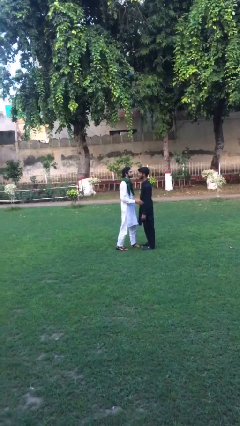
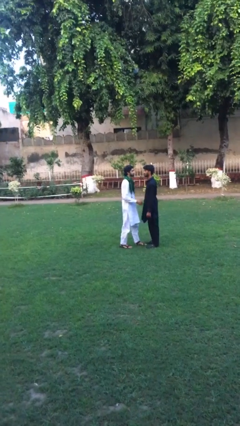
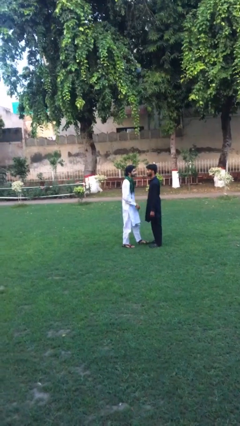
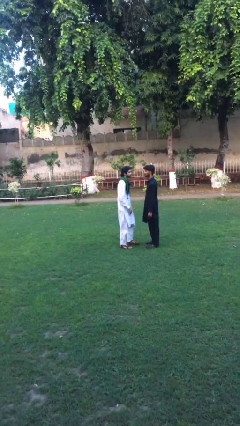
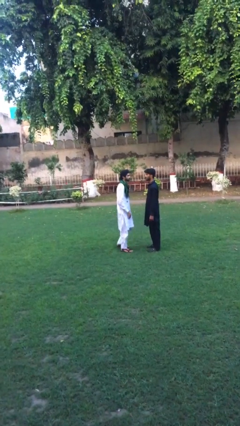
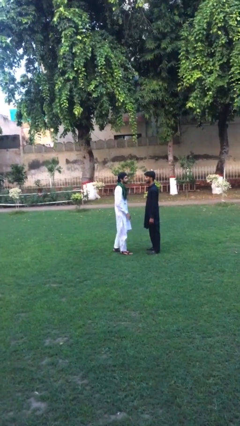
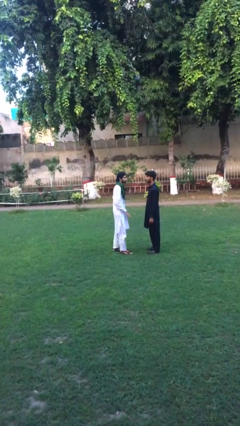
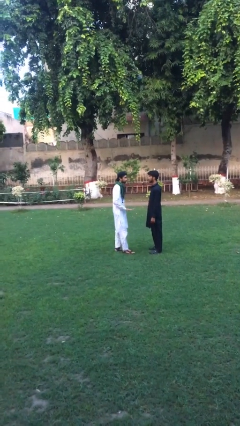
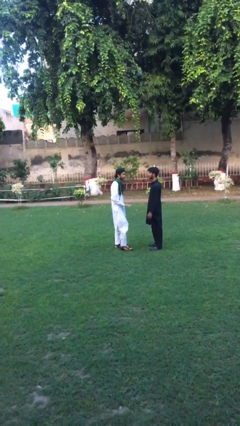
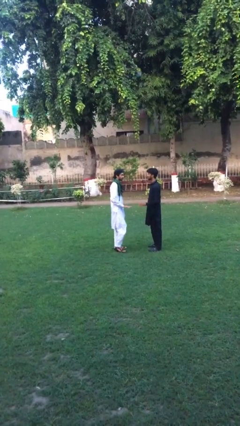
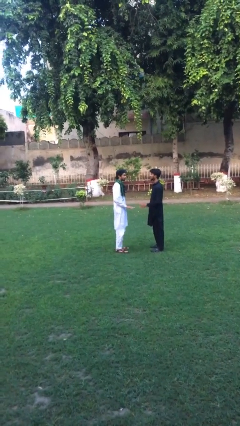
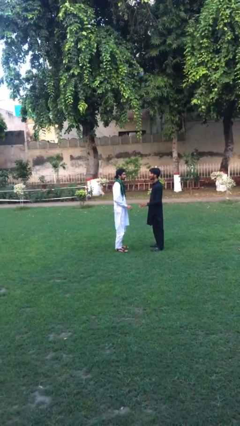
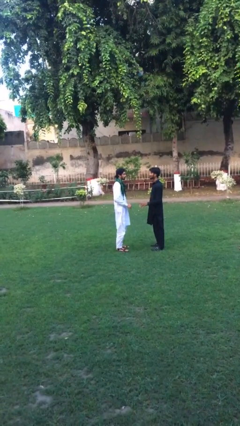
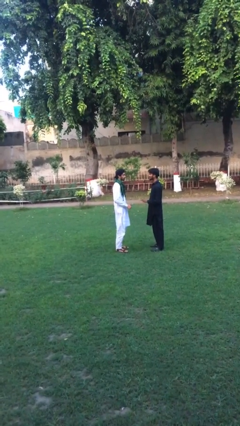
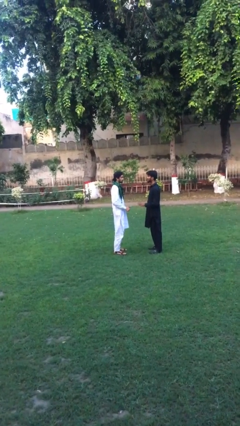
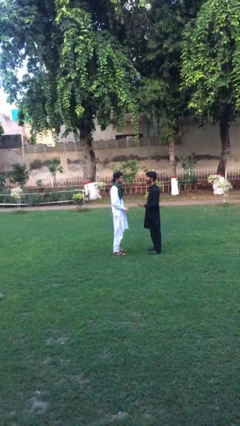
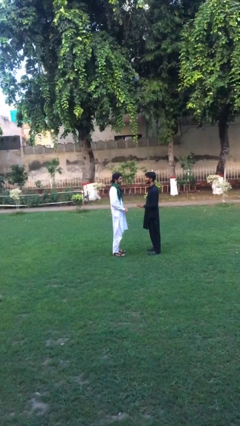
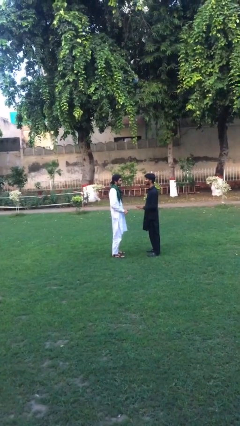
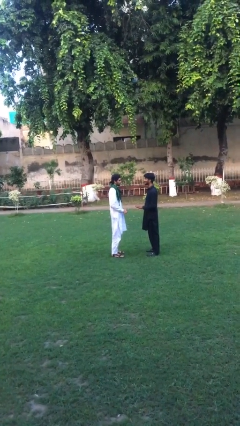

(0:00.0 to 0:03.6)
person talks to person

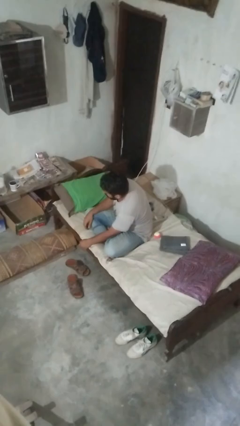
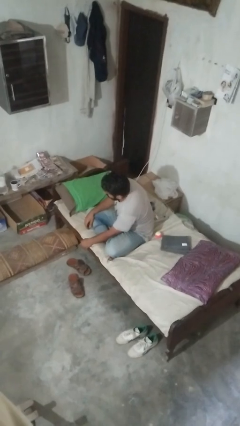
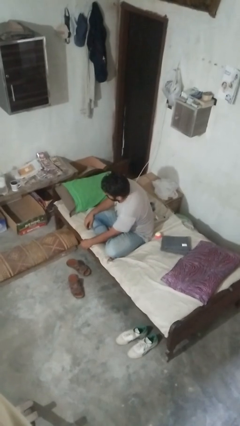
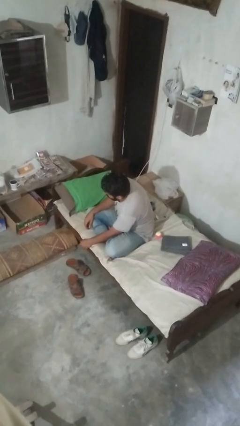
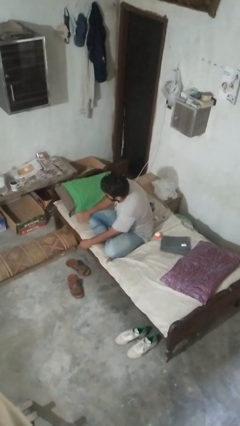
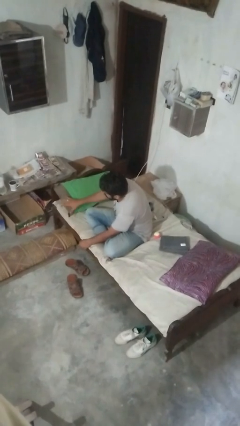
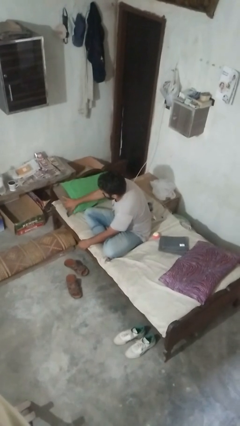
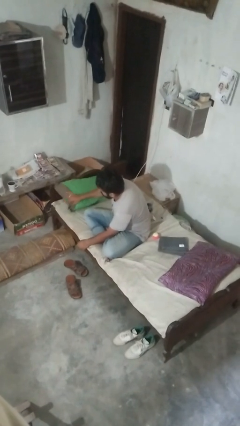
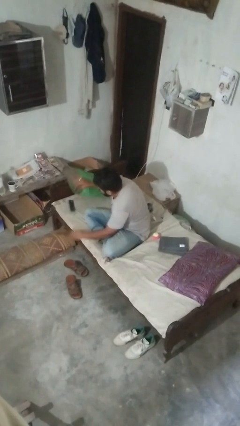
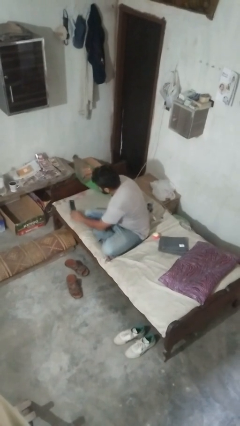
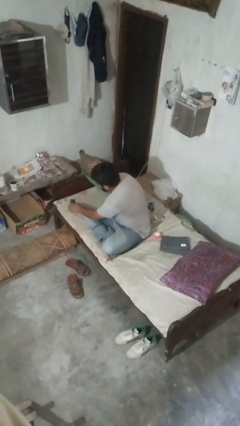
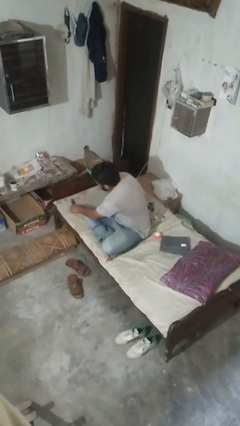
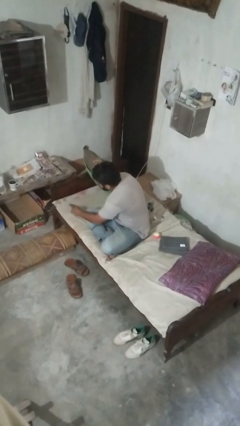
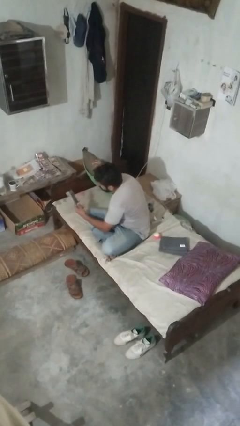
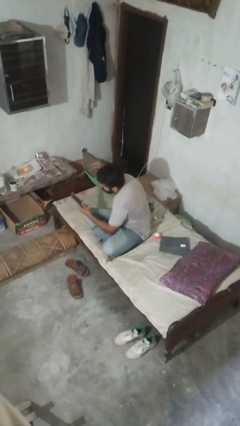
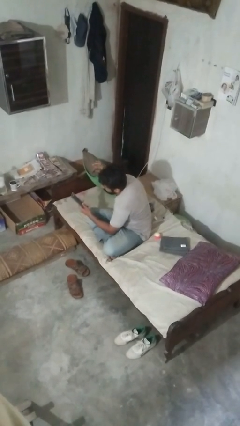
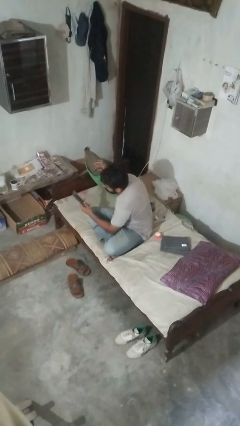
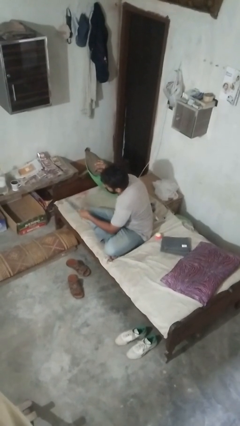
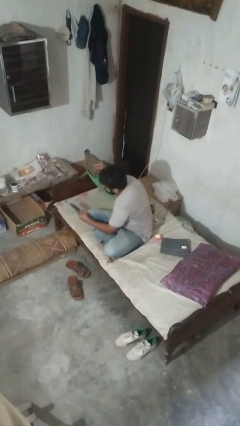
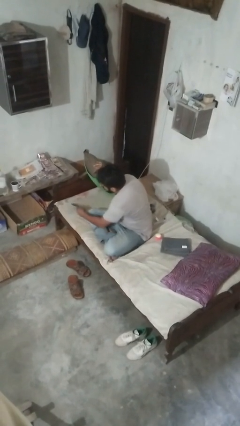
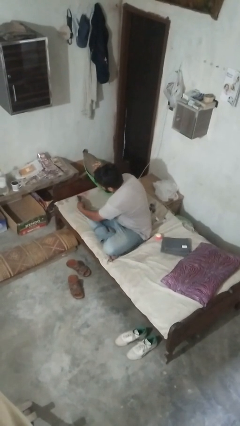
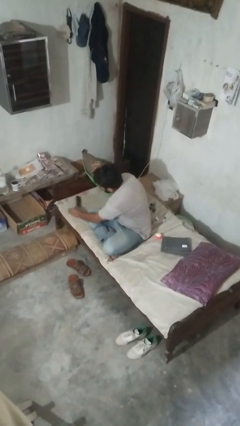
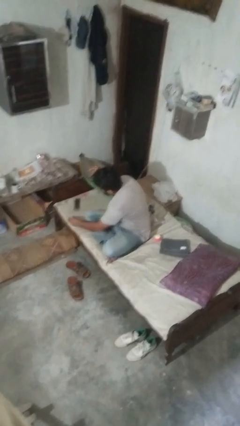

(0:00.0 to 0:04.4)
person searches in couch

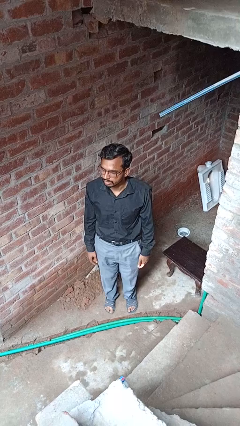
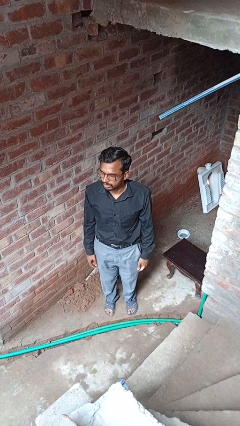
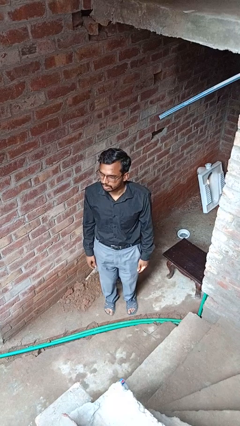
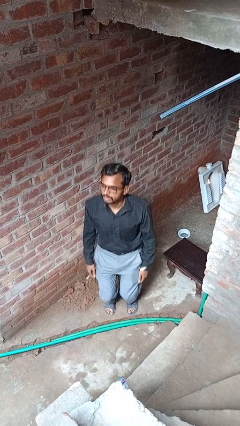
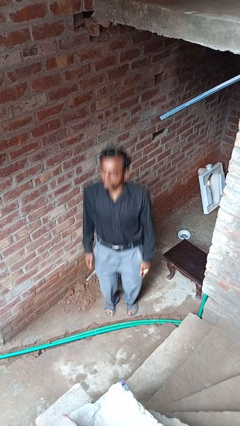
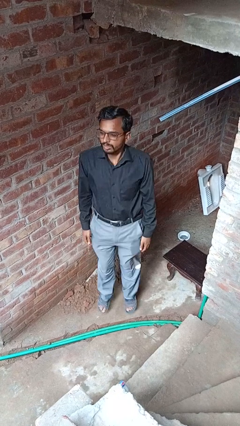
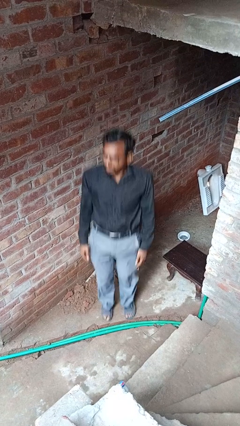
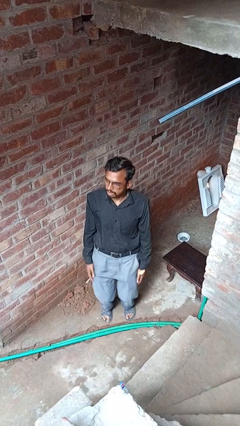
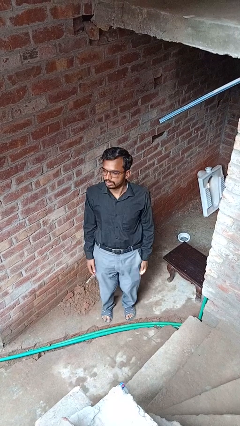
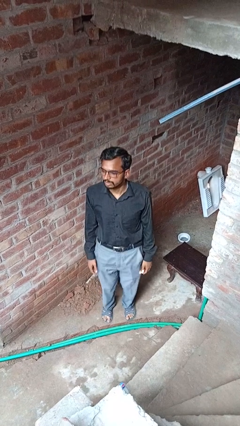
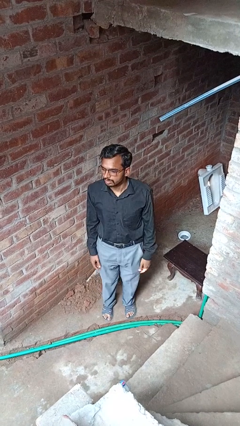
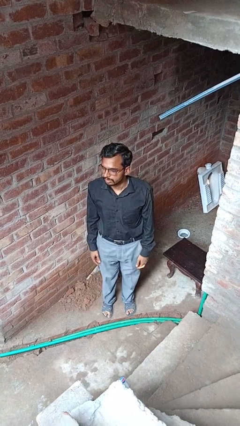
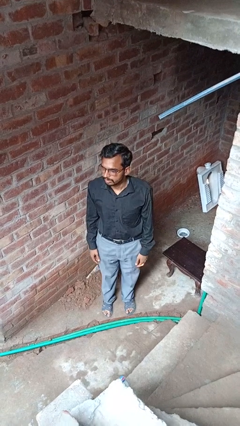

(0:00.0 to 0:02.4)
person jumps

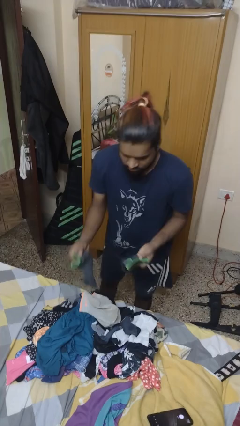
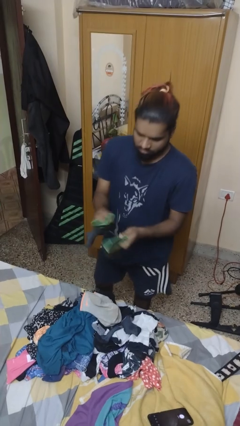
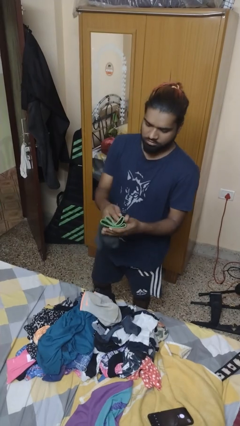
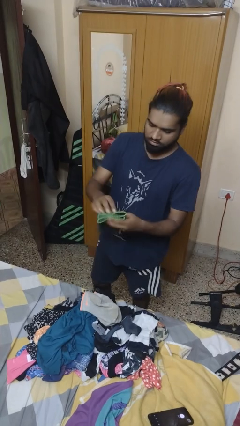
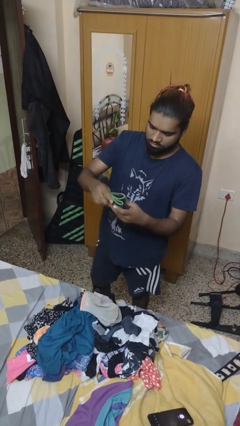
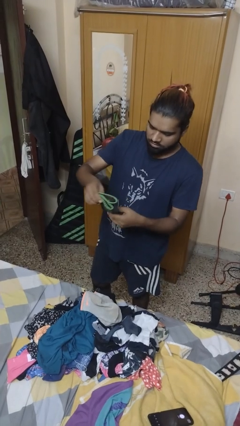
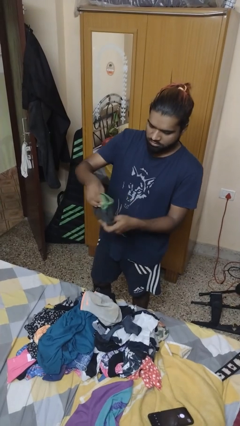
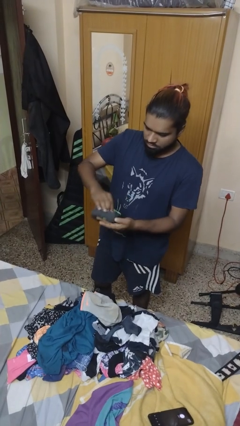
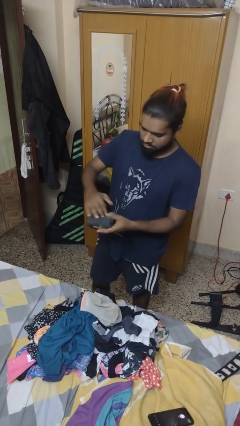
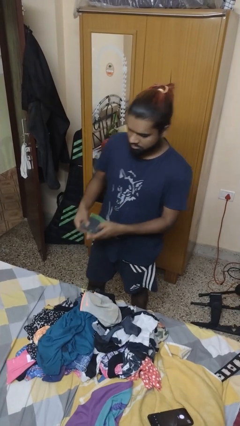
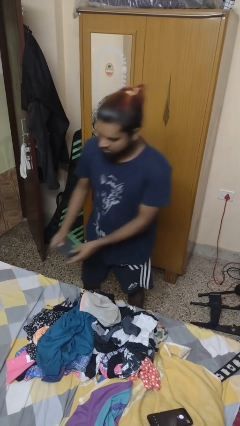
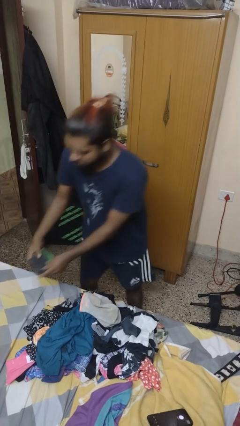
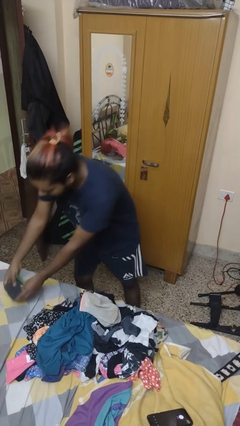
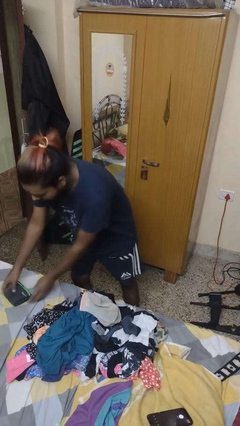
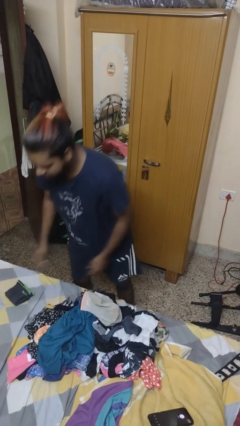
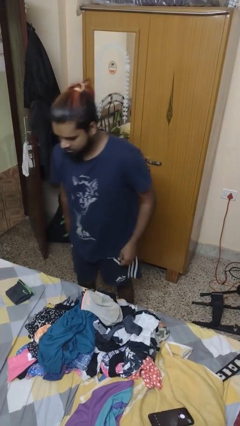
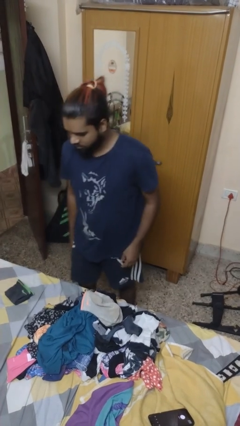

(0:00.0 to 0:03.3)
person folds socks

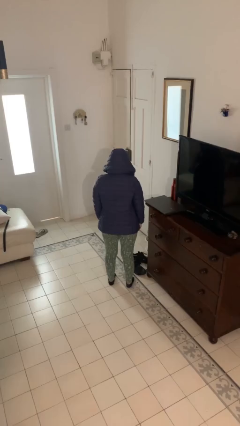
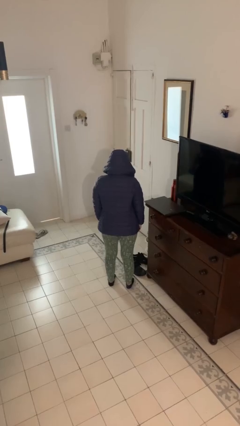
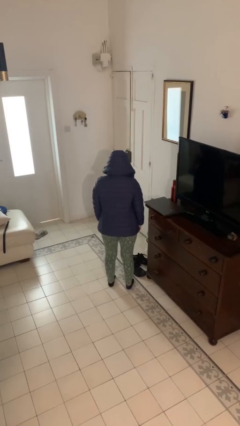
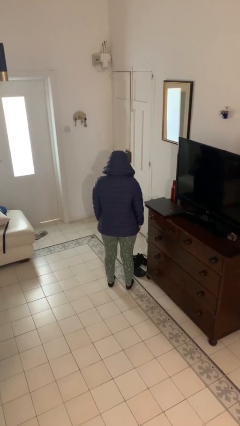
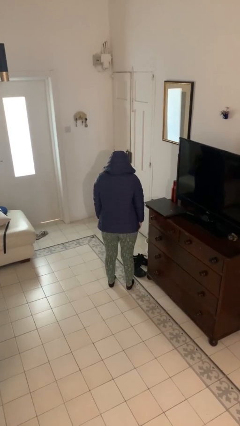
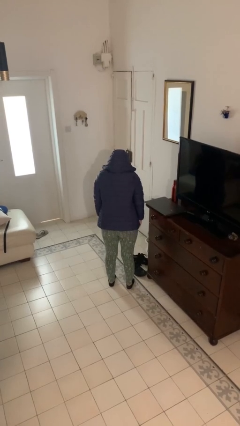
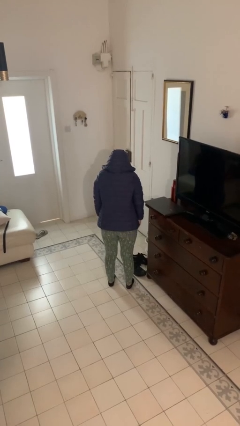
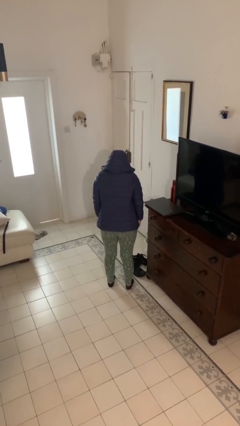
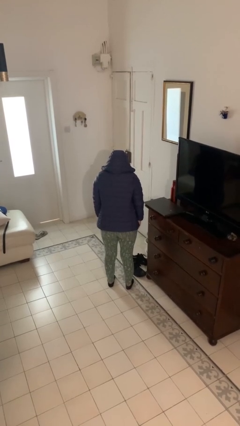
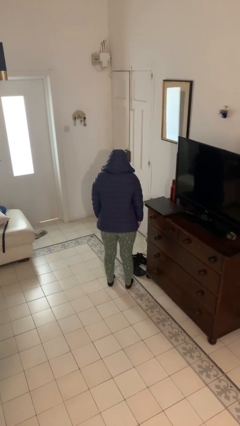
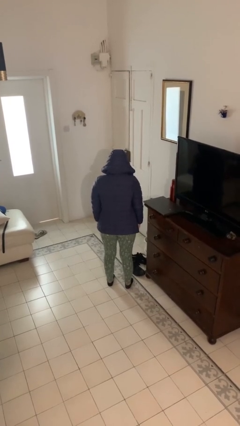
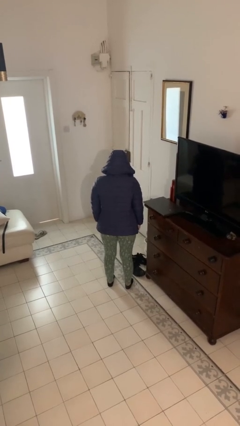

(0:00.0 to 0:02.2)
person shrugs

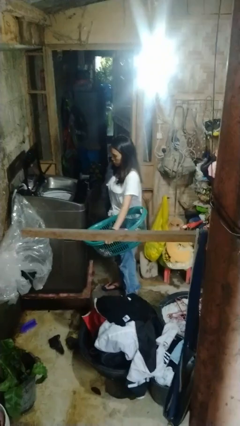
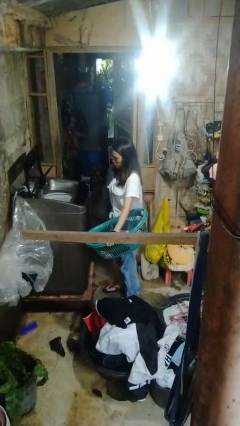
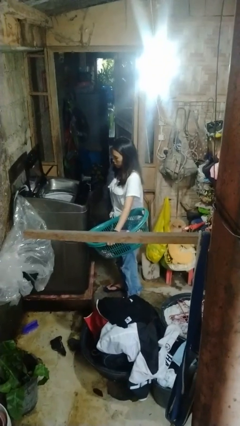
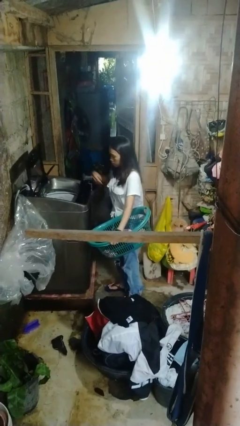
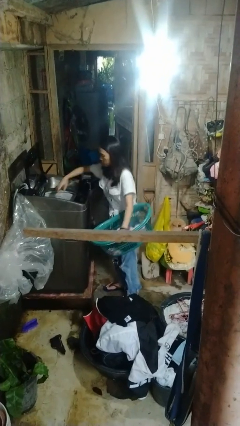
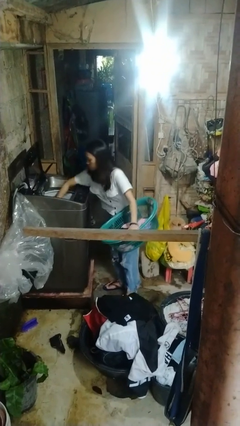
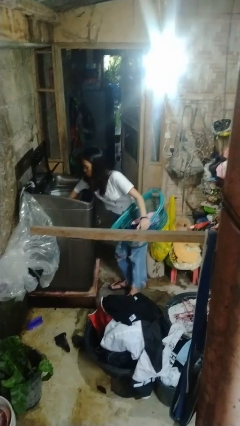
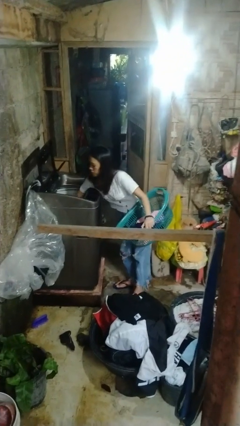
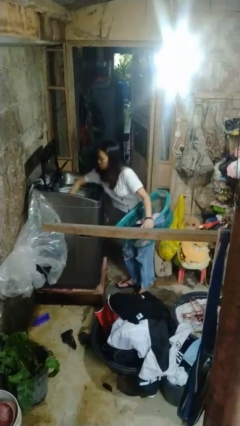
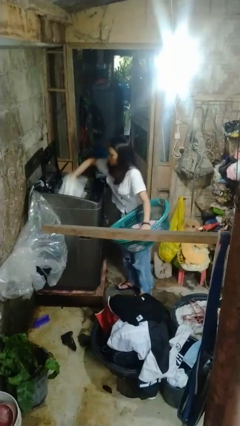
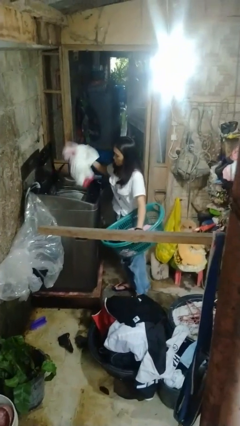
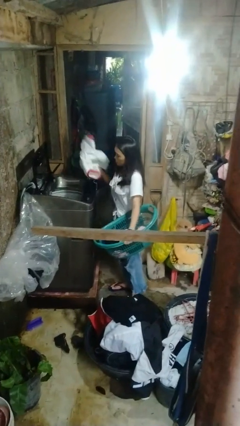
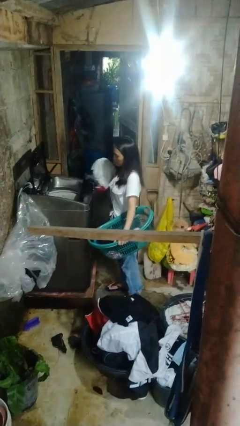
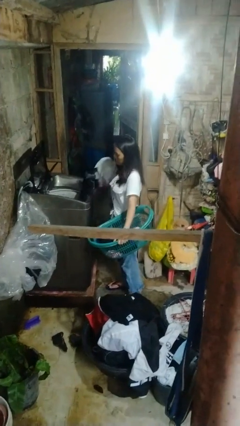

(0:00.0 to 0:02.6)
person unloads clotheswasher
